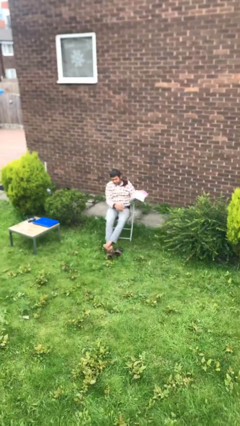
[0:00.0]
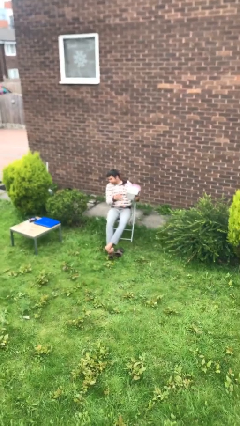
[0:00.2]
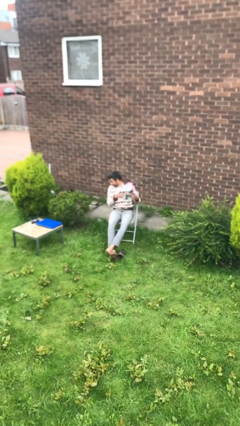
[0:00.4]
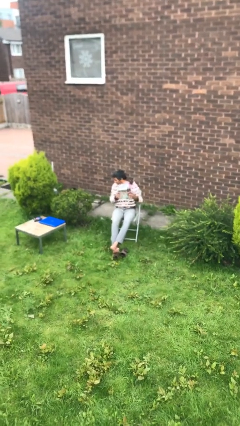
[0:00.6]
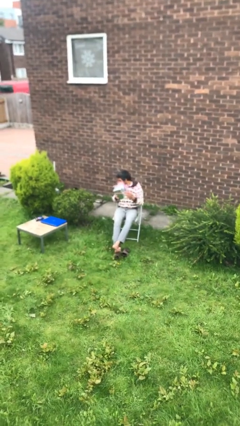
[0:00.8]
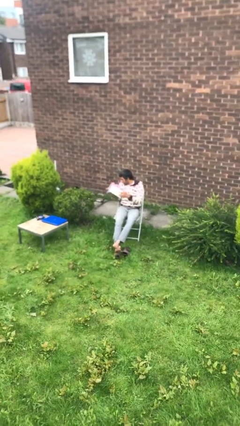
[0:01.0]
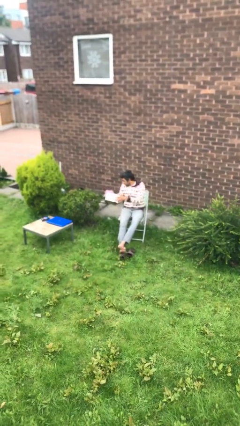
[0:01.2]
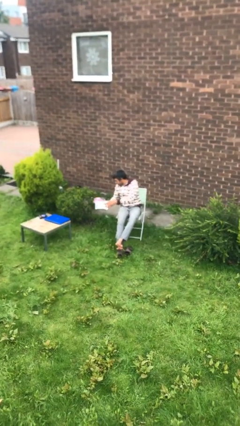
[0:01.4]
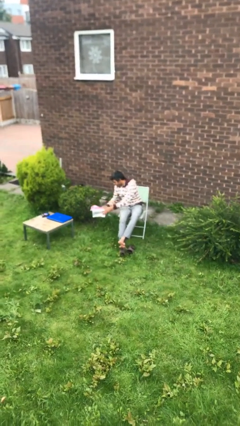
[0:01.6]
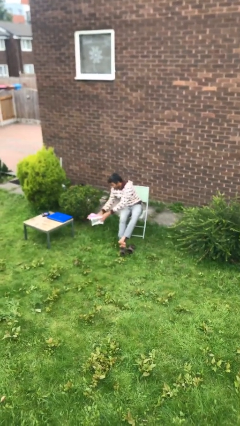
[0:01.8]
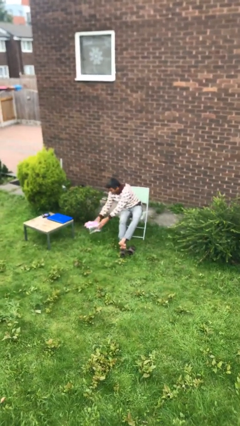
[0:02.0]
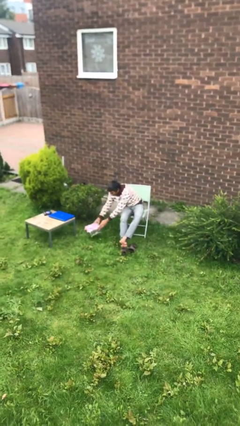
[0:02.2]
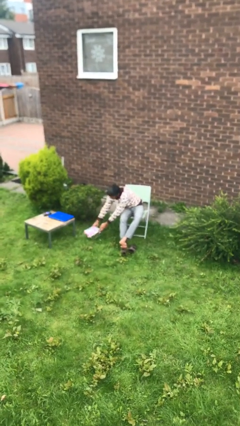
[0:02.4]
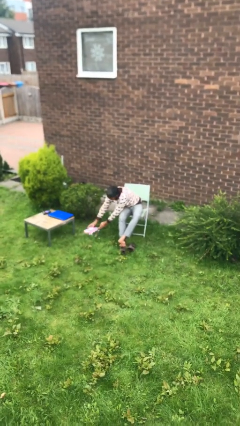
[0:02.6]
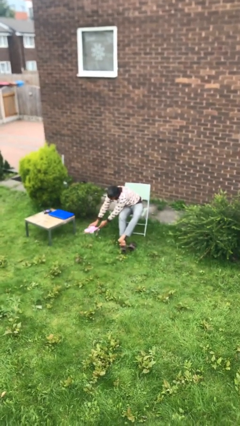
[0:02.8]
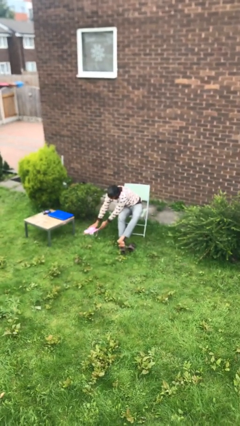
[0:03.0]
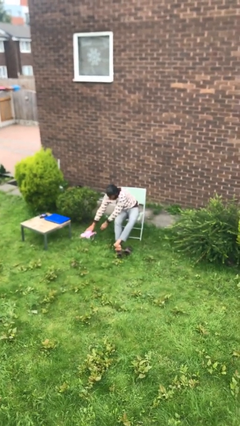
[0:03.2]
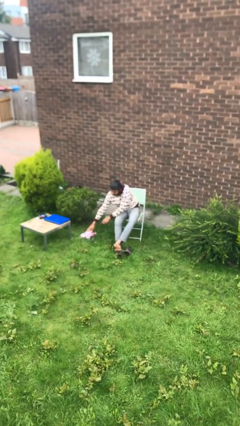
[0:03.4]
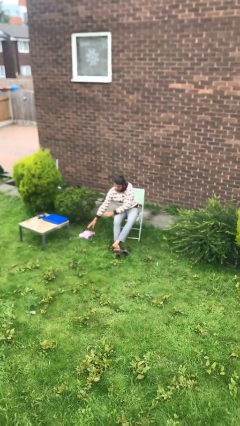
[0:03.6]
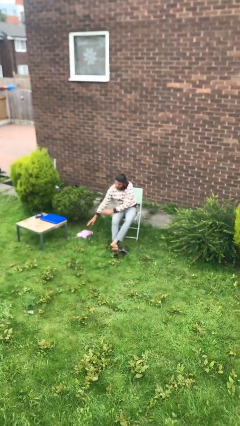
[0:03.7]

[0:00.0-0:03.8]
person puts down object on floor

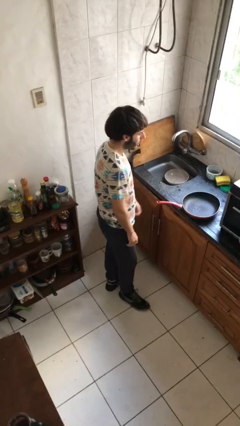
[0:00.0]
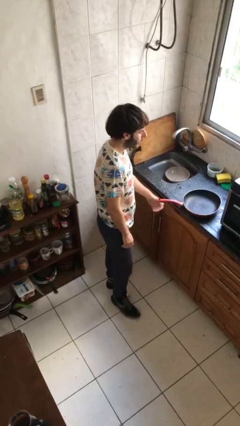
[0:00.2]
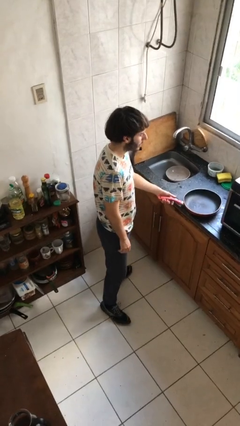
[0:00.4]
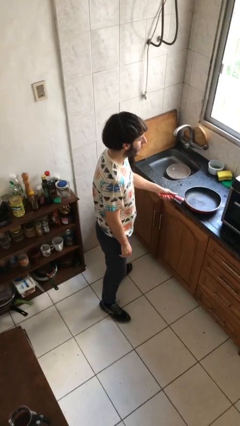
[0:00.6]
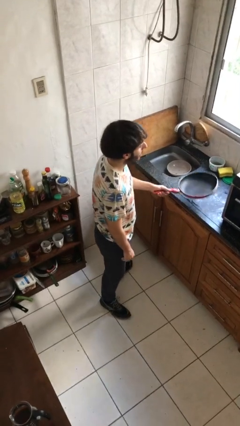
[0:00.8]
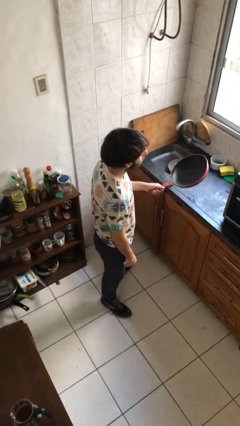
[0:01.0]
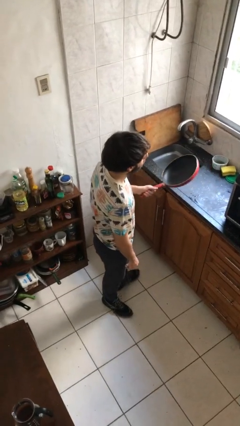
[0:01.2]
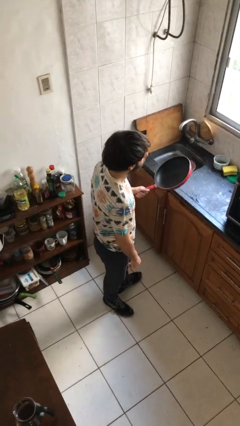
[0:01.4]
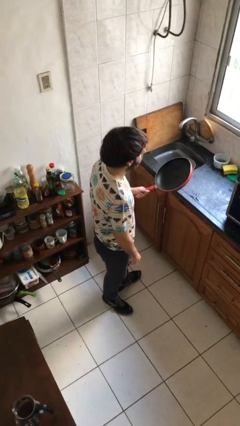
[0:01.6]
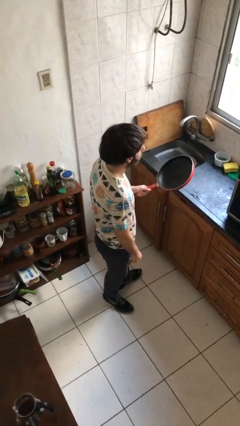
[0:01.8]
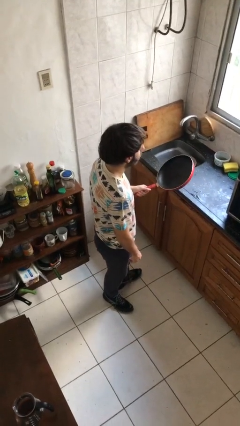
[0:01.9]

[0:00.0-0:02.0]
person picks up object from countertop

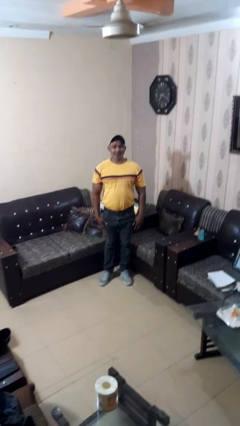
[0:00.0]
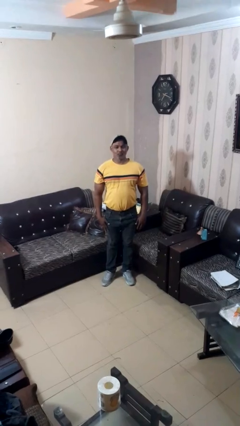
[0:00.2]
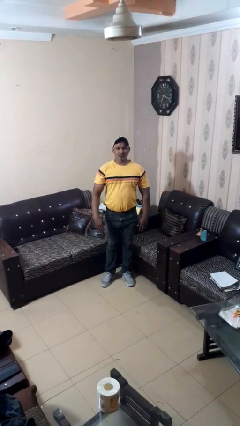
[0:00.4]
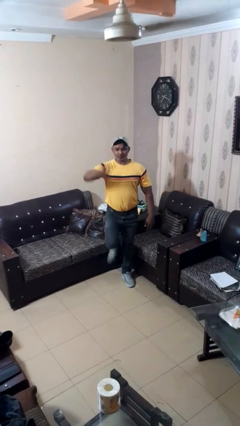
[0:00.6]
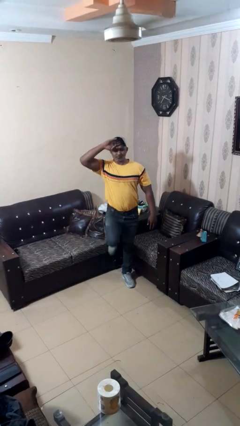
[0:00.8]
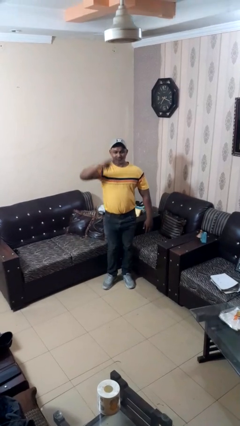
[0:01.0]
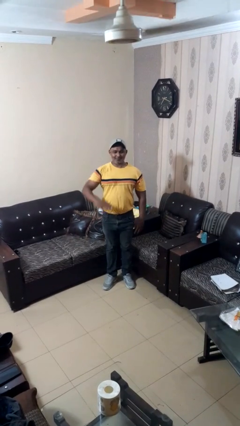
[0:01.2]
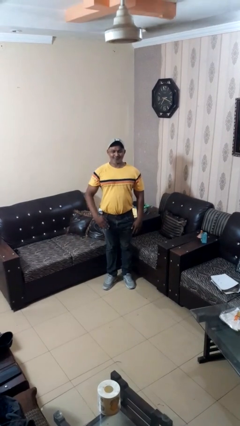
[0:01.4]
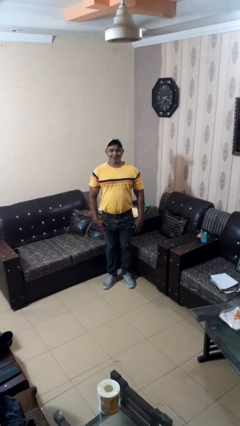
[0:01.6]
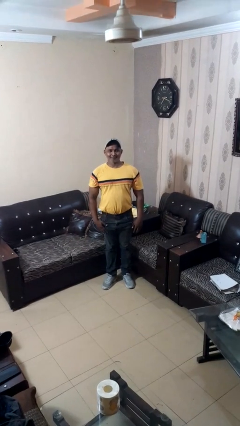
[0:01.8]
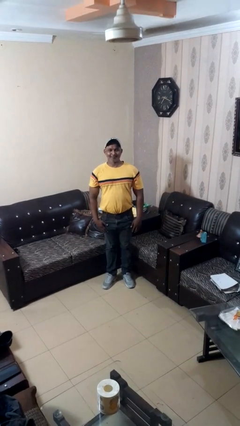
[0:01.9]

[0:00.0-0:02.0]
person salutes

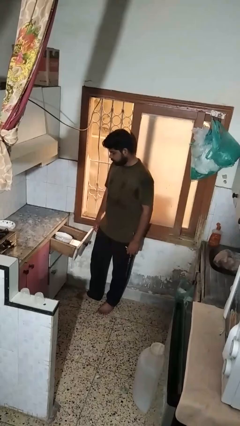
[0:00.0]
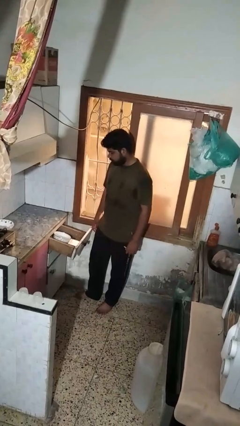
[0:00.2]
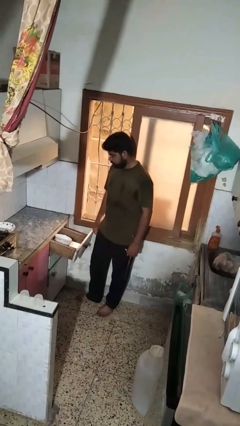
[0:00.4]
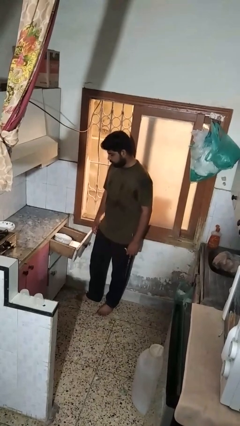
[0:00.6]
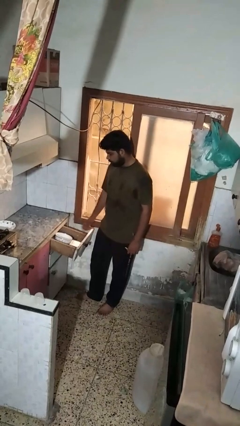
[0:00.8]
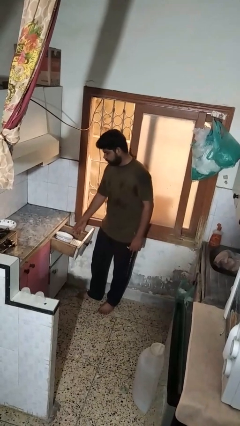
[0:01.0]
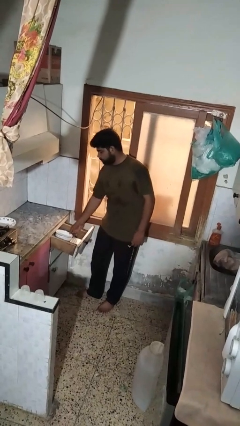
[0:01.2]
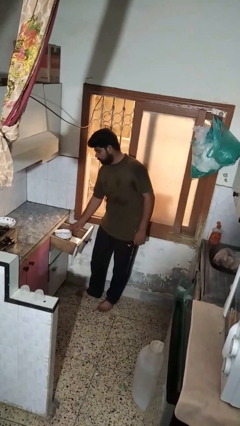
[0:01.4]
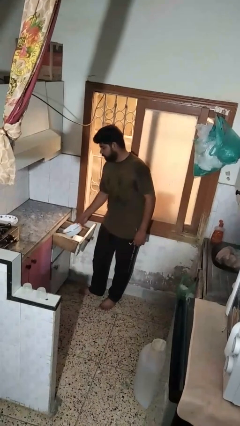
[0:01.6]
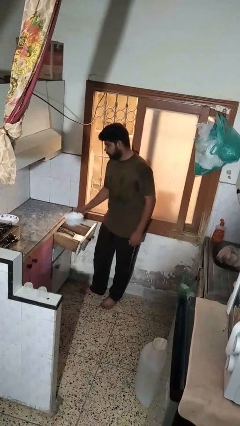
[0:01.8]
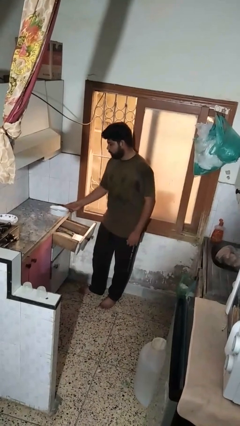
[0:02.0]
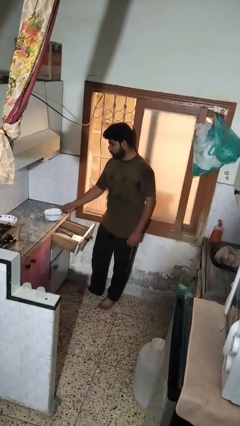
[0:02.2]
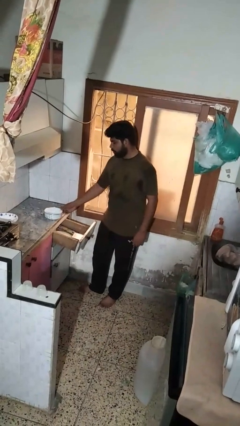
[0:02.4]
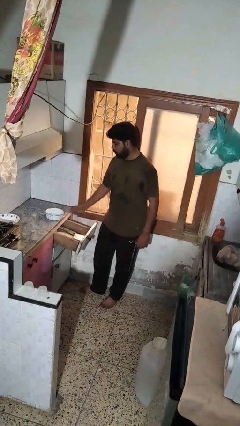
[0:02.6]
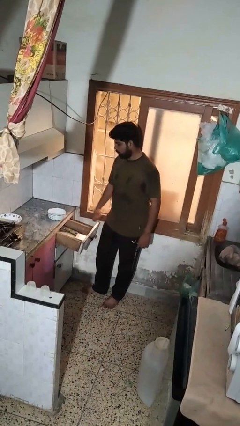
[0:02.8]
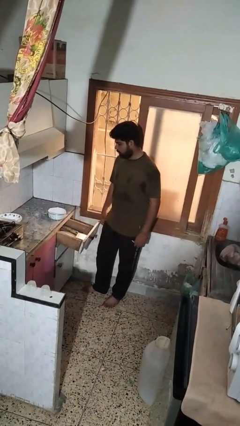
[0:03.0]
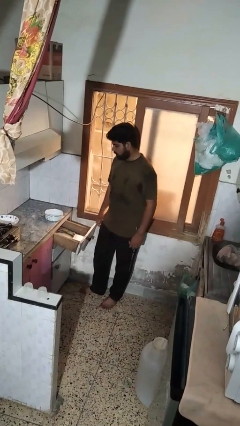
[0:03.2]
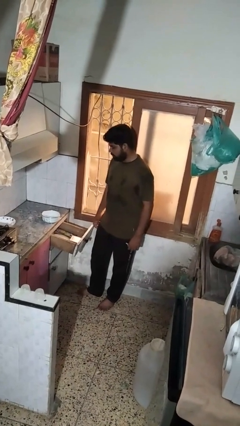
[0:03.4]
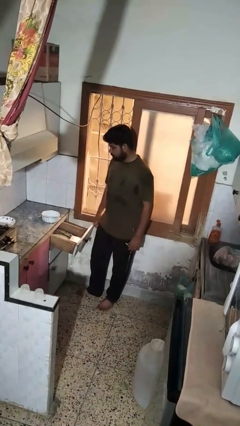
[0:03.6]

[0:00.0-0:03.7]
person takes object from kitchen drawer

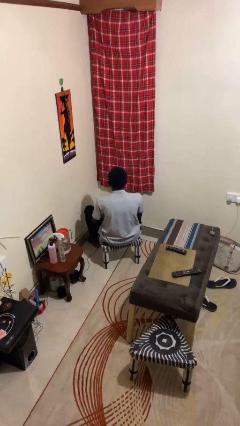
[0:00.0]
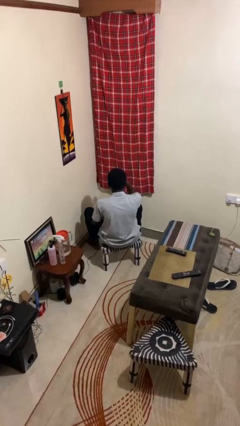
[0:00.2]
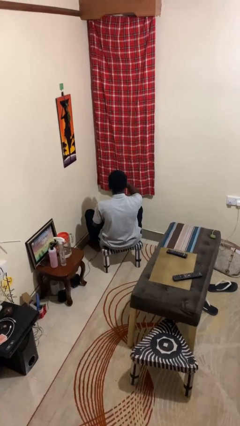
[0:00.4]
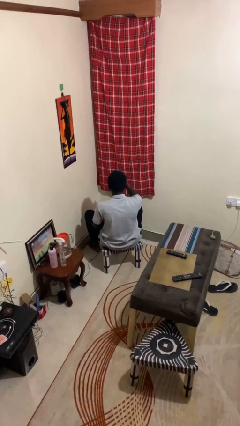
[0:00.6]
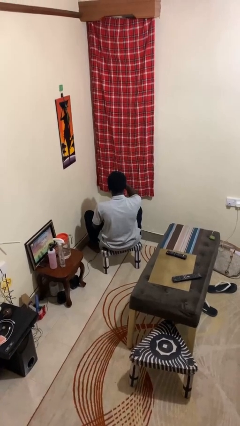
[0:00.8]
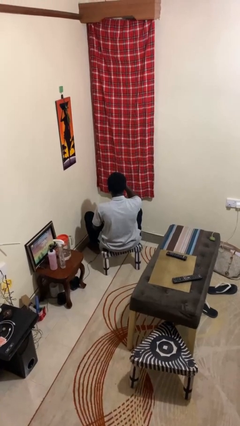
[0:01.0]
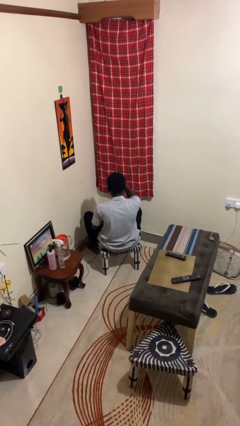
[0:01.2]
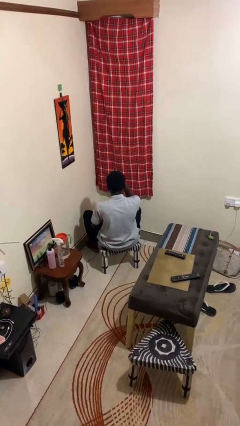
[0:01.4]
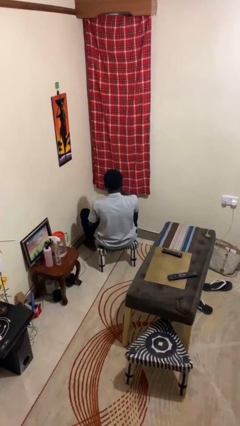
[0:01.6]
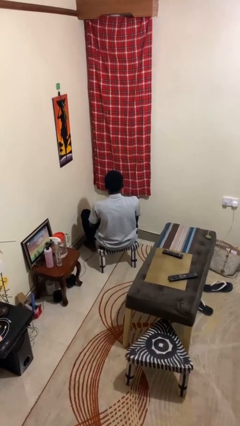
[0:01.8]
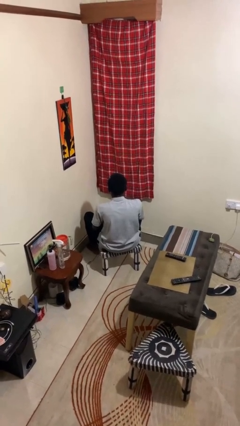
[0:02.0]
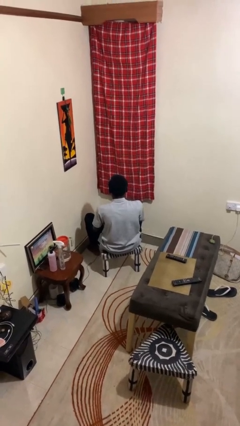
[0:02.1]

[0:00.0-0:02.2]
person scratches face

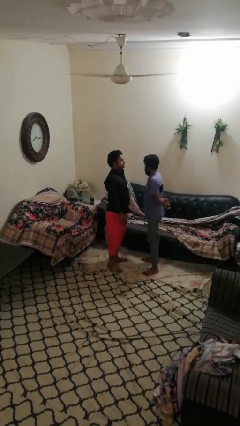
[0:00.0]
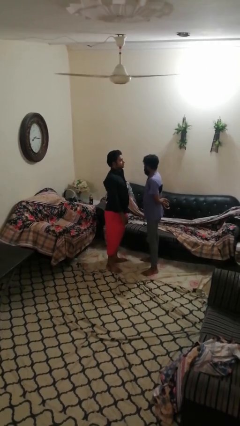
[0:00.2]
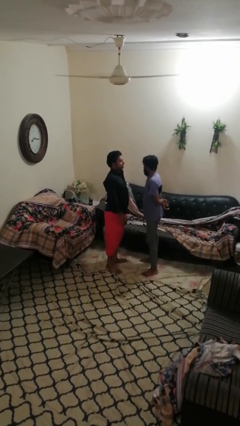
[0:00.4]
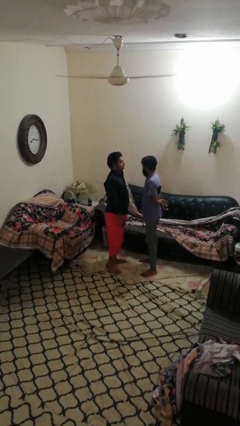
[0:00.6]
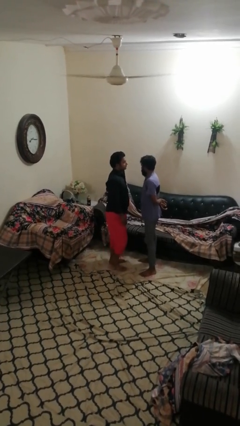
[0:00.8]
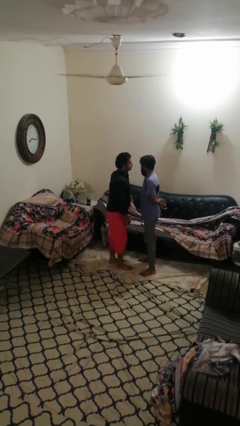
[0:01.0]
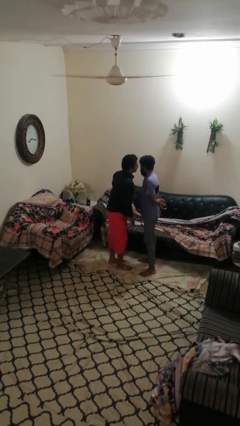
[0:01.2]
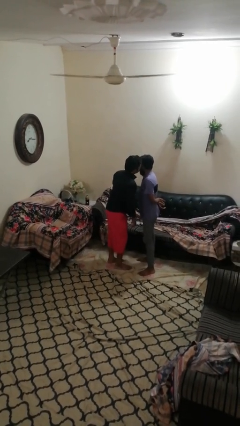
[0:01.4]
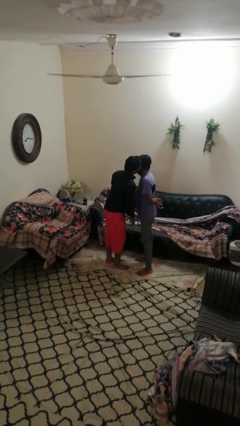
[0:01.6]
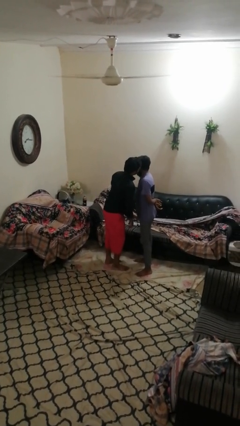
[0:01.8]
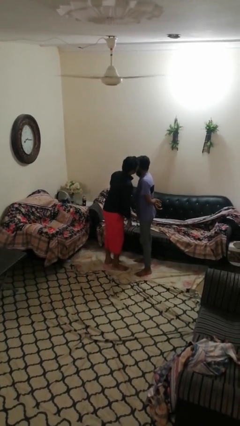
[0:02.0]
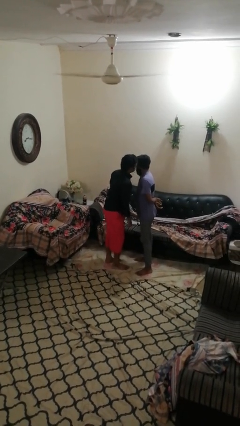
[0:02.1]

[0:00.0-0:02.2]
person kisses cheek of person

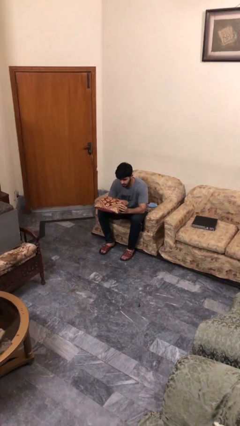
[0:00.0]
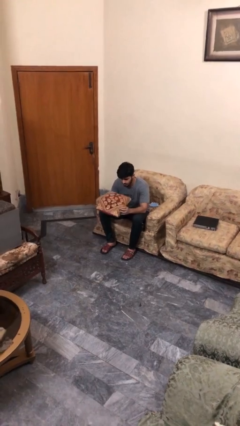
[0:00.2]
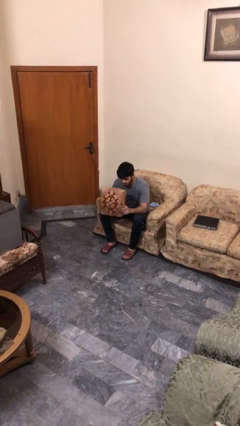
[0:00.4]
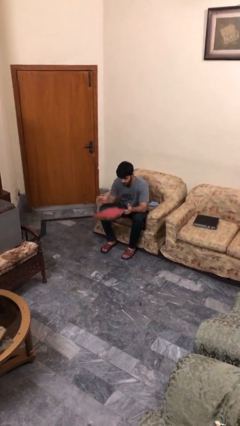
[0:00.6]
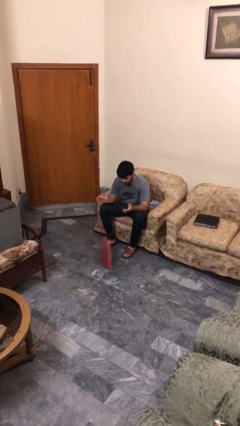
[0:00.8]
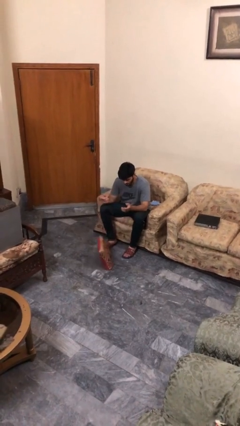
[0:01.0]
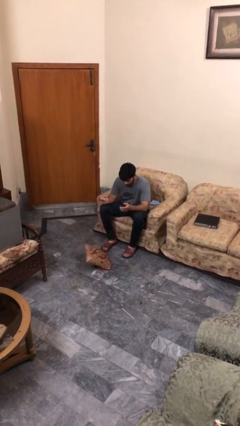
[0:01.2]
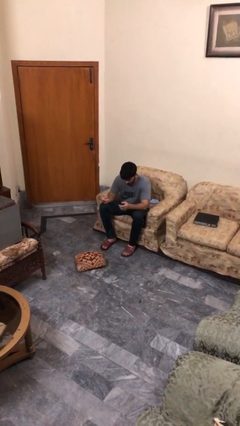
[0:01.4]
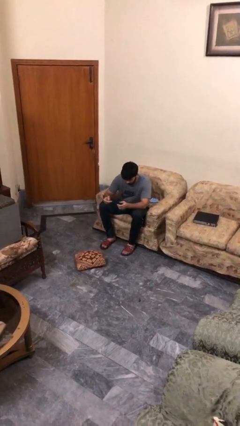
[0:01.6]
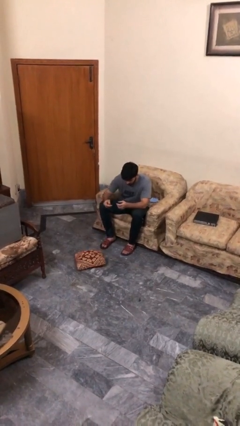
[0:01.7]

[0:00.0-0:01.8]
person drops object
